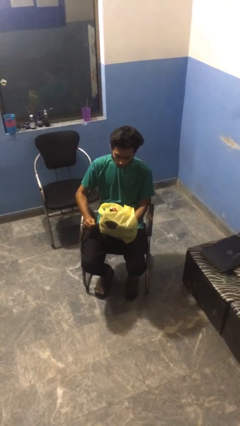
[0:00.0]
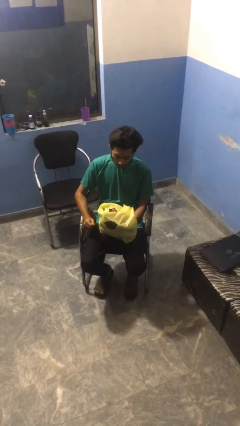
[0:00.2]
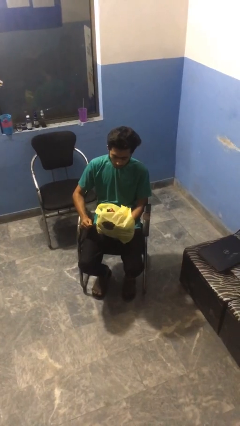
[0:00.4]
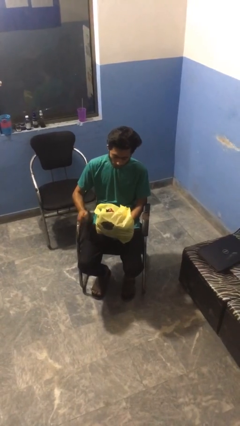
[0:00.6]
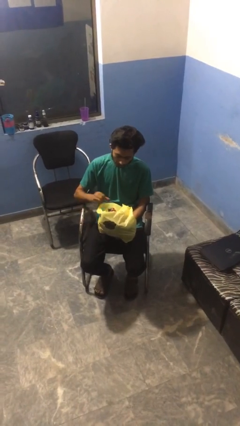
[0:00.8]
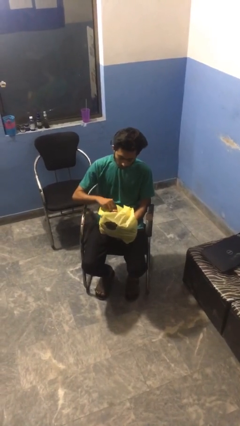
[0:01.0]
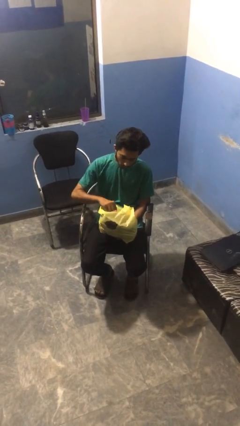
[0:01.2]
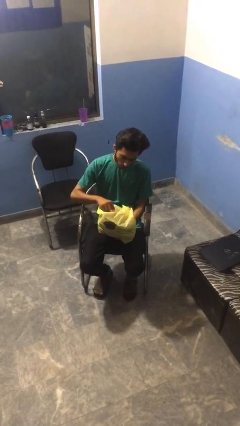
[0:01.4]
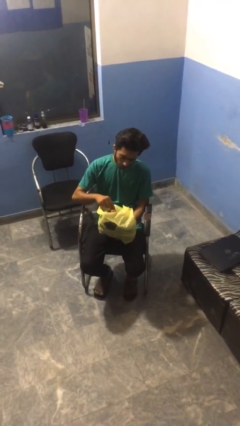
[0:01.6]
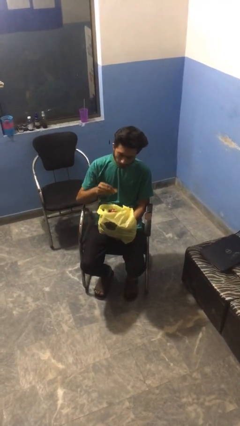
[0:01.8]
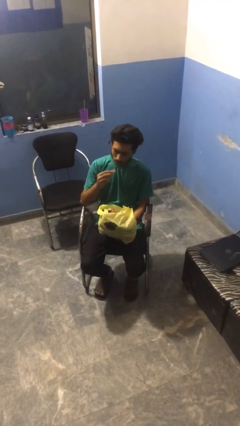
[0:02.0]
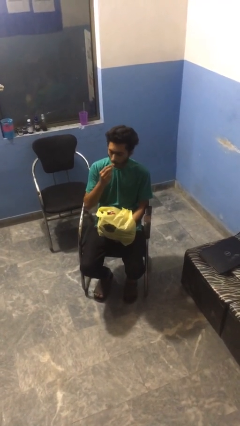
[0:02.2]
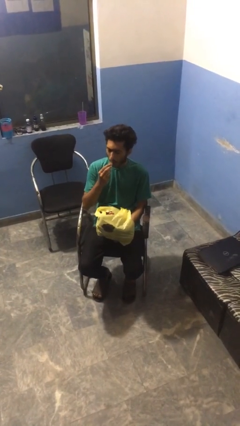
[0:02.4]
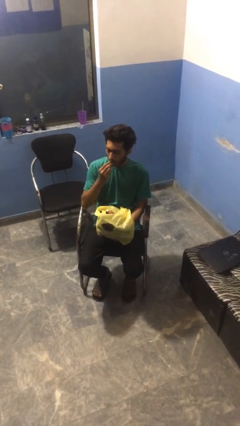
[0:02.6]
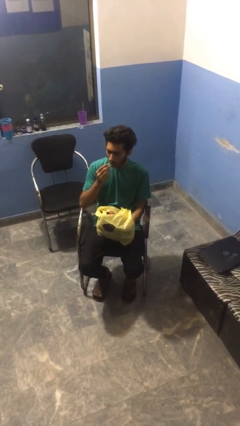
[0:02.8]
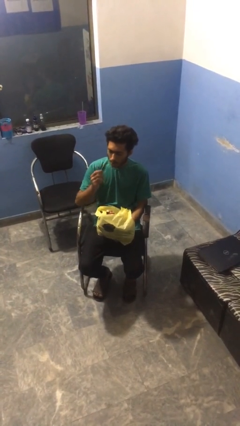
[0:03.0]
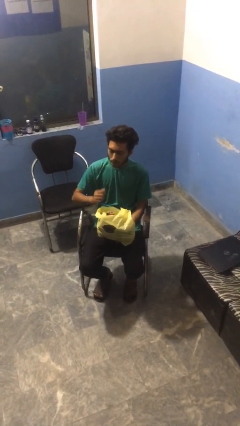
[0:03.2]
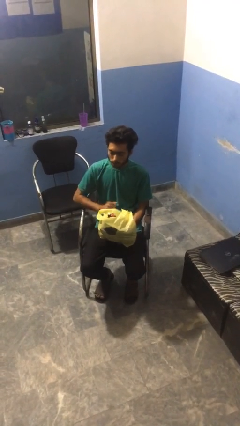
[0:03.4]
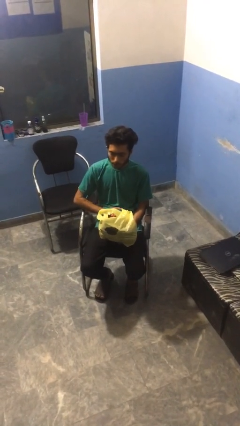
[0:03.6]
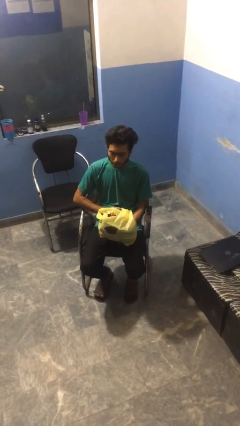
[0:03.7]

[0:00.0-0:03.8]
person eats snack from bag

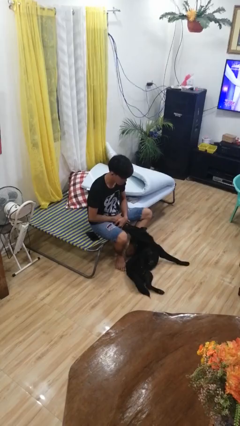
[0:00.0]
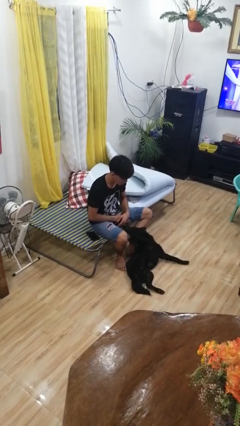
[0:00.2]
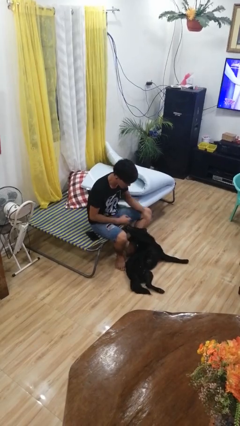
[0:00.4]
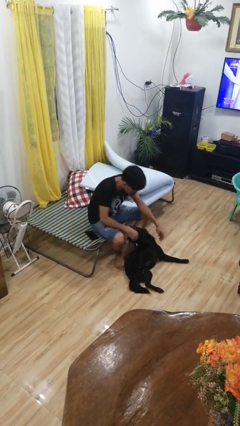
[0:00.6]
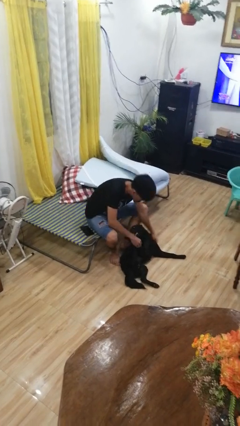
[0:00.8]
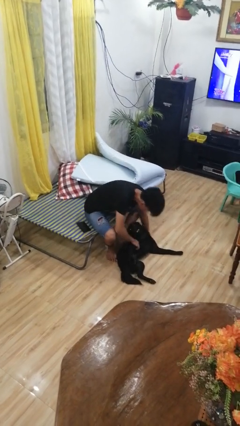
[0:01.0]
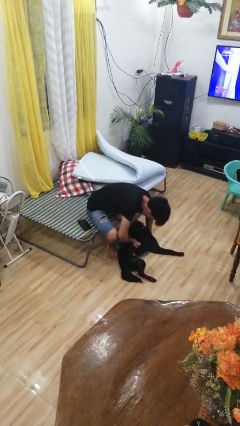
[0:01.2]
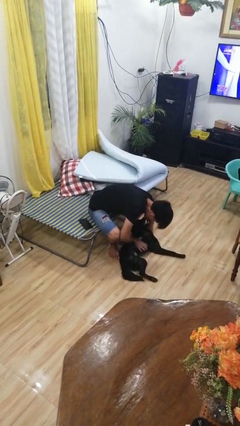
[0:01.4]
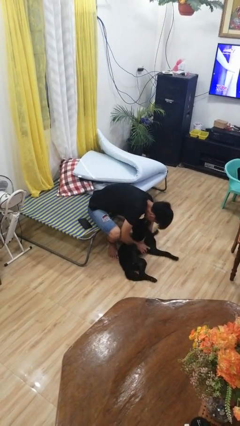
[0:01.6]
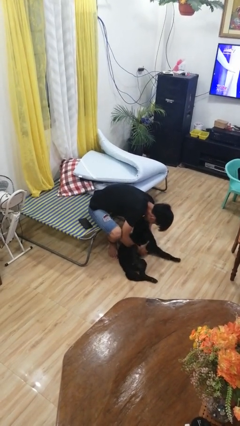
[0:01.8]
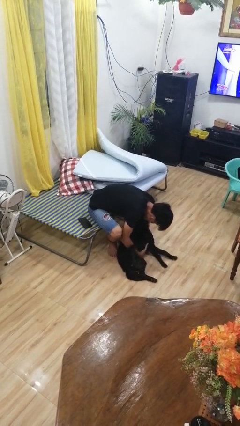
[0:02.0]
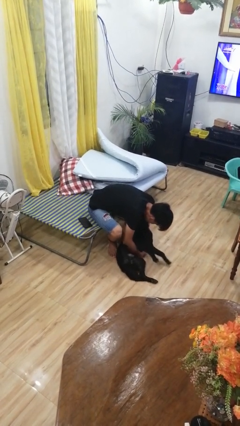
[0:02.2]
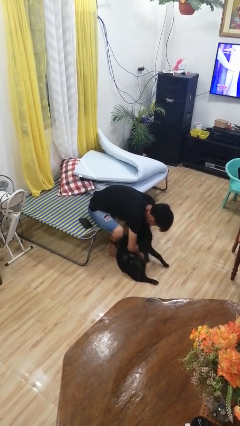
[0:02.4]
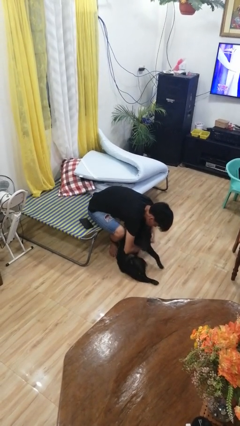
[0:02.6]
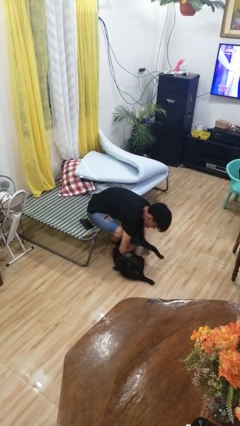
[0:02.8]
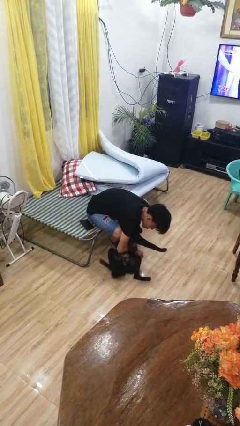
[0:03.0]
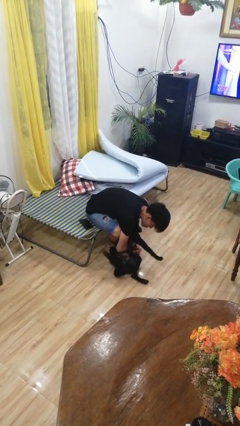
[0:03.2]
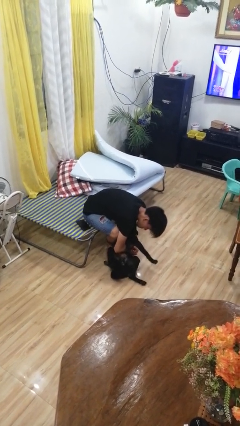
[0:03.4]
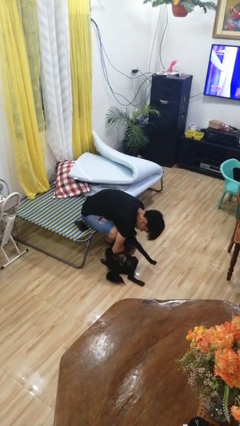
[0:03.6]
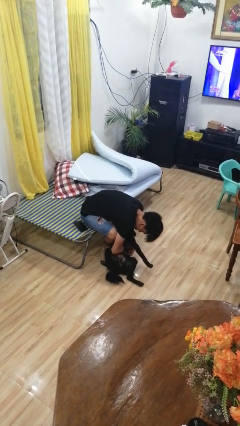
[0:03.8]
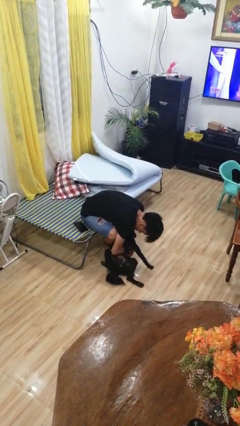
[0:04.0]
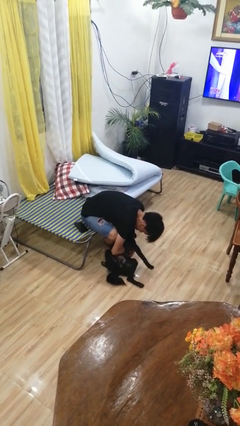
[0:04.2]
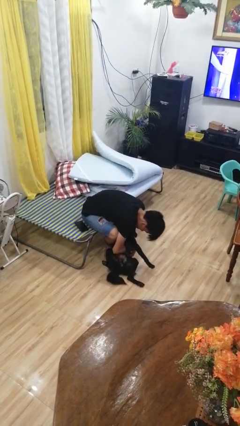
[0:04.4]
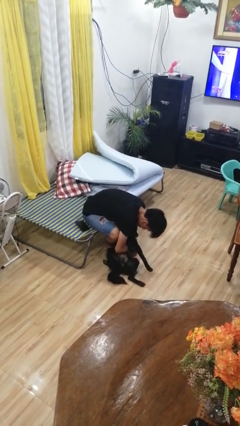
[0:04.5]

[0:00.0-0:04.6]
person hugs dog

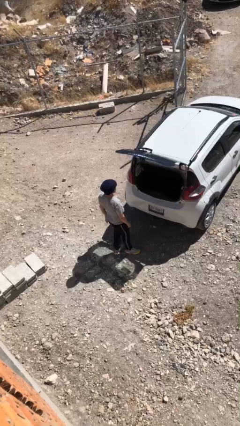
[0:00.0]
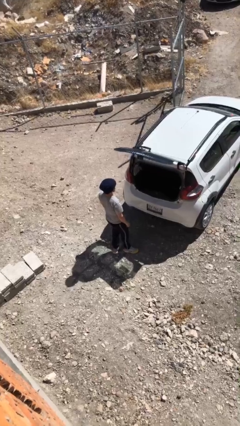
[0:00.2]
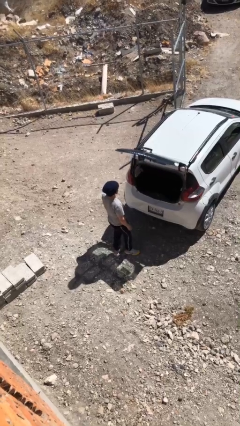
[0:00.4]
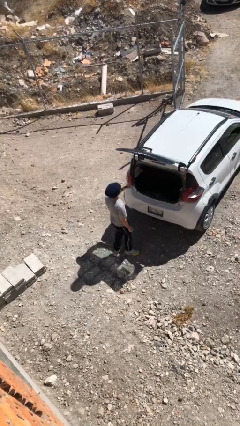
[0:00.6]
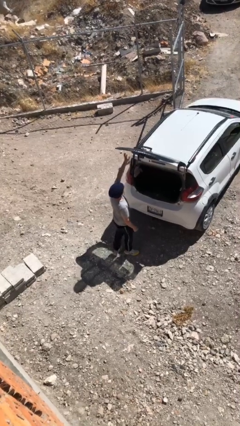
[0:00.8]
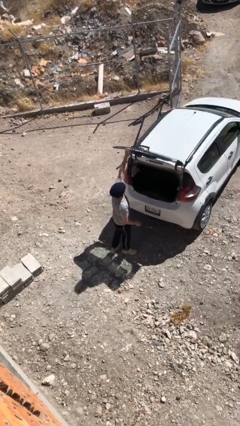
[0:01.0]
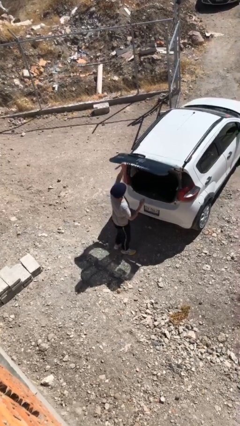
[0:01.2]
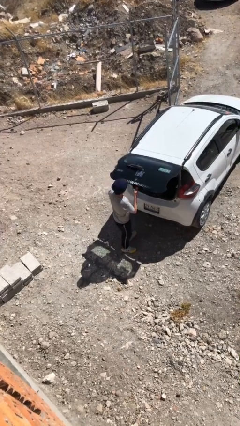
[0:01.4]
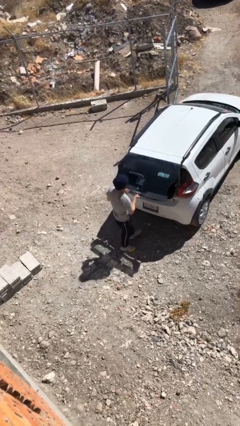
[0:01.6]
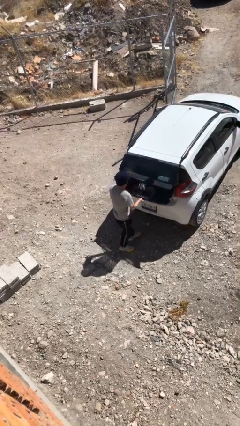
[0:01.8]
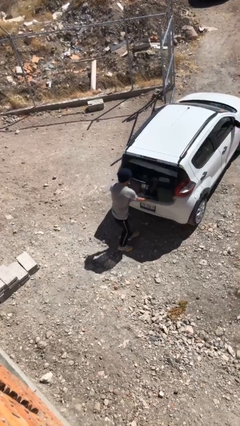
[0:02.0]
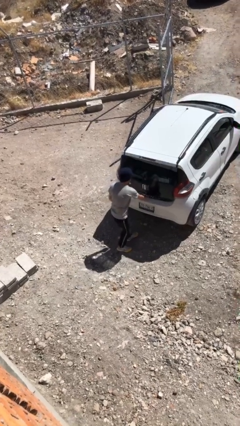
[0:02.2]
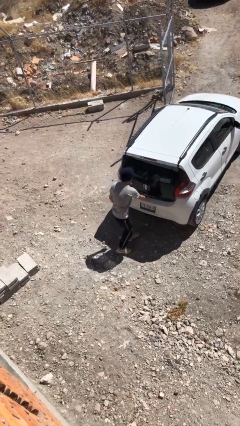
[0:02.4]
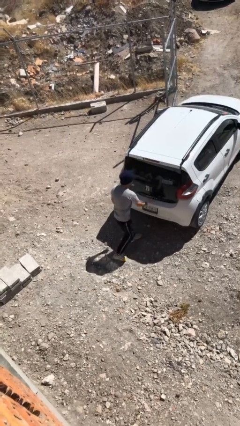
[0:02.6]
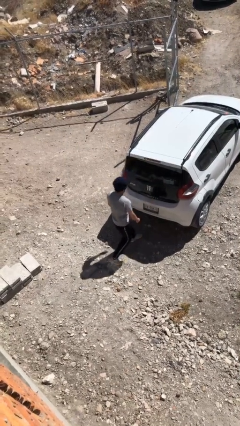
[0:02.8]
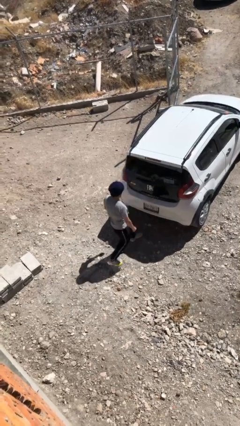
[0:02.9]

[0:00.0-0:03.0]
person closes car trunk

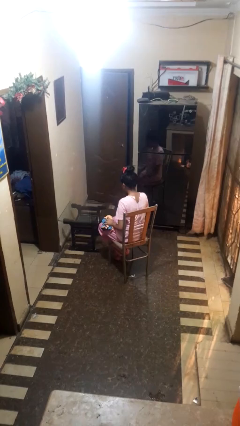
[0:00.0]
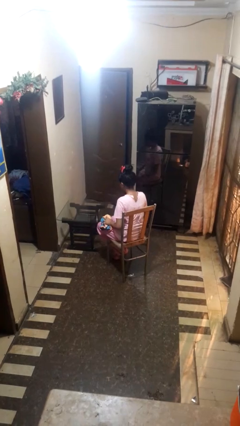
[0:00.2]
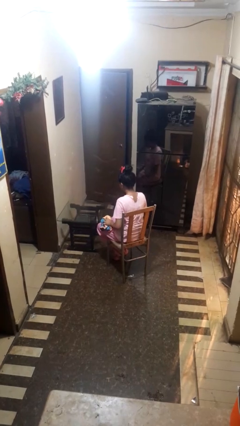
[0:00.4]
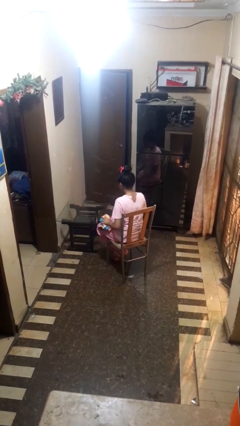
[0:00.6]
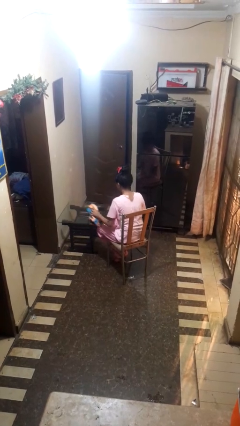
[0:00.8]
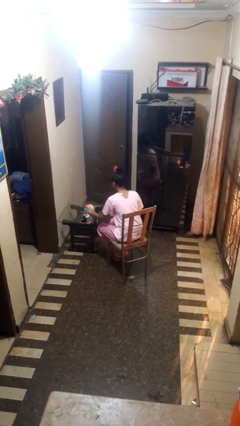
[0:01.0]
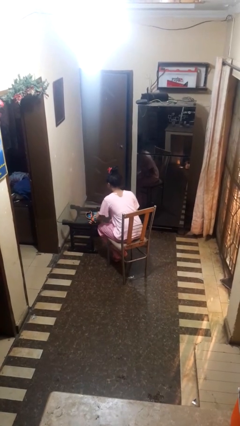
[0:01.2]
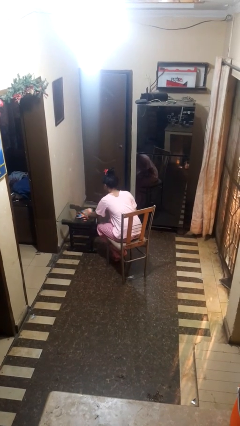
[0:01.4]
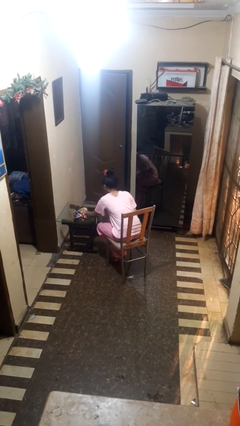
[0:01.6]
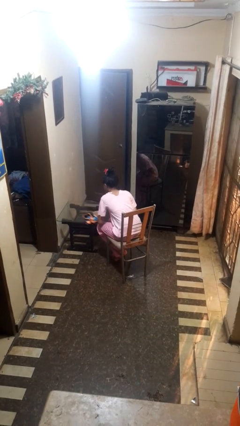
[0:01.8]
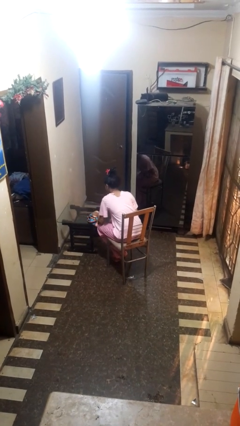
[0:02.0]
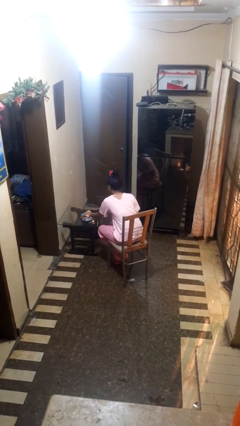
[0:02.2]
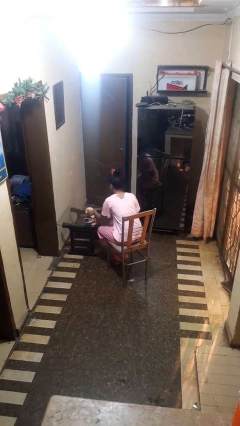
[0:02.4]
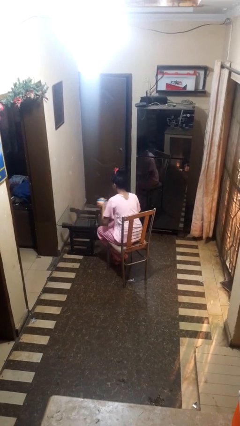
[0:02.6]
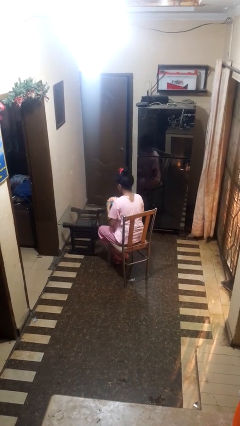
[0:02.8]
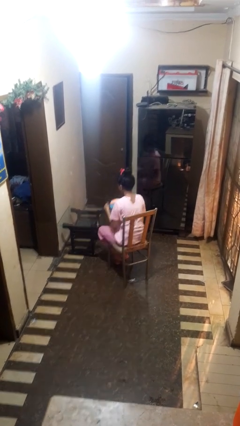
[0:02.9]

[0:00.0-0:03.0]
person cleans table with rag

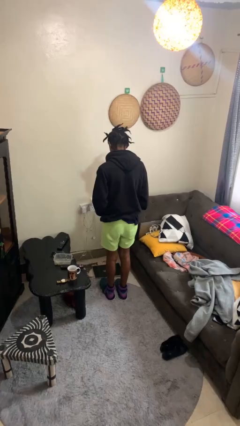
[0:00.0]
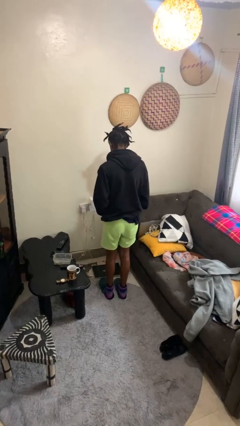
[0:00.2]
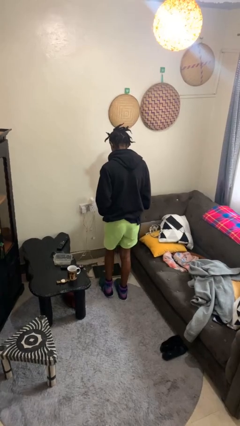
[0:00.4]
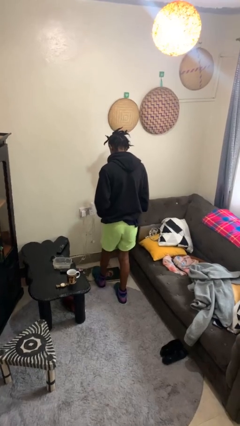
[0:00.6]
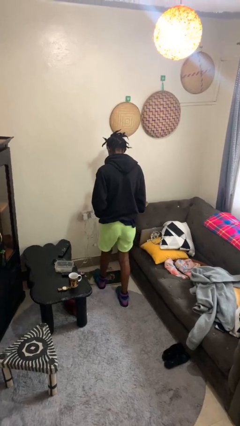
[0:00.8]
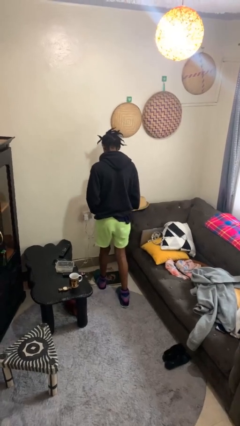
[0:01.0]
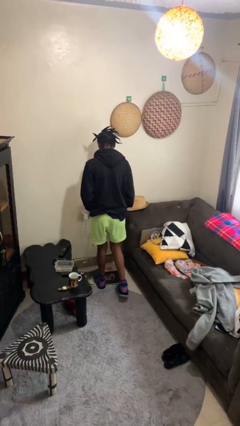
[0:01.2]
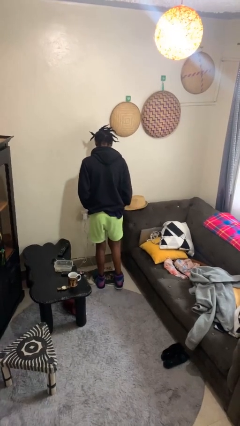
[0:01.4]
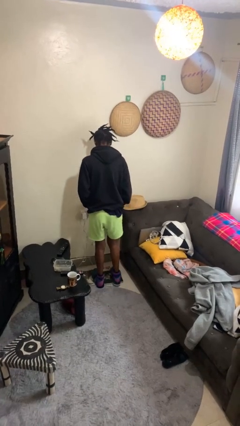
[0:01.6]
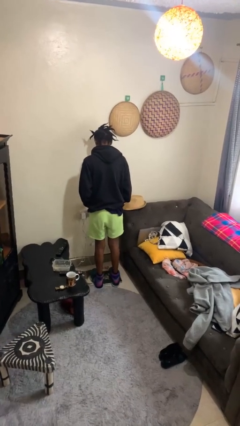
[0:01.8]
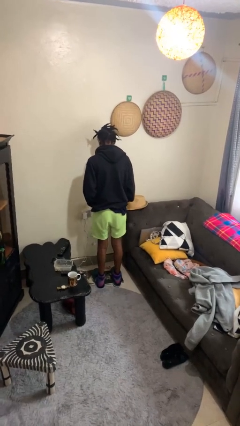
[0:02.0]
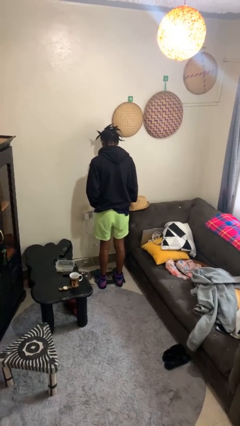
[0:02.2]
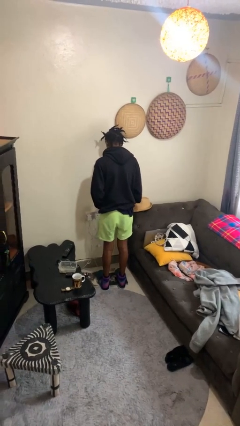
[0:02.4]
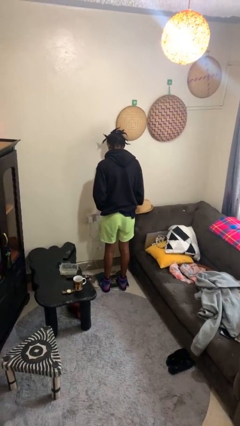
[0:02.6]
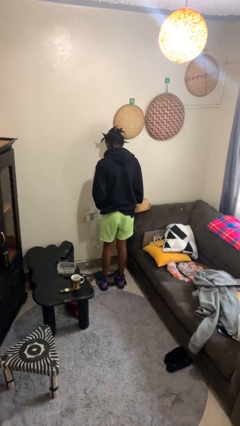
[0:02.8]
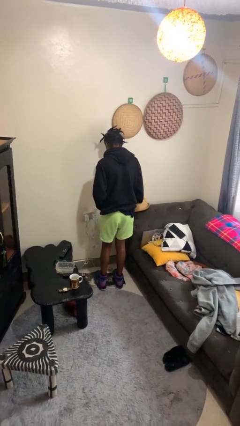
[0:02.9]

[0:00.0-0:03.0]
person uses bodyweight scale

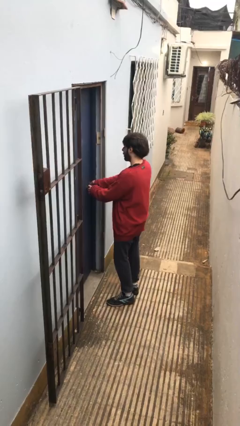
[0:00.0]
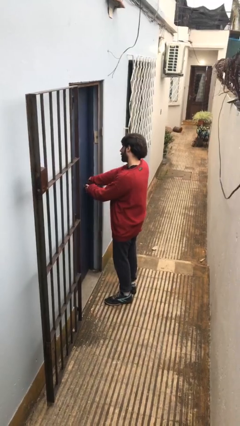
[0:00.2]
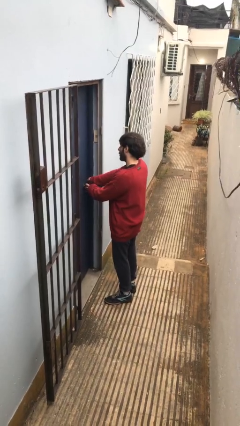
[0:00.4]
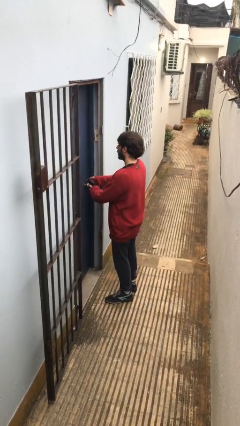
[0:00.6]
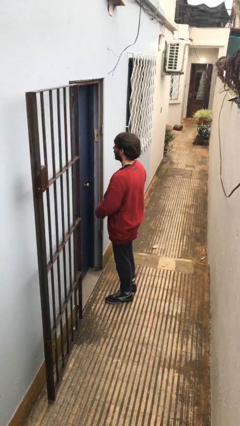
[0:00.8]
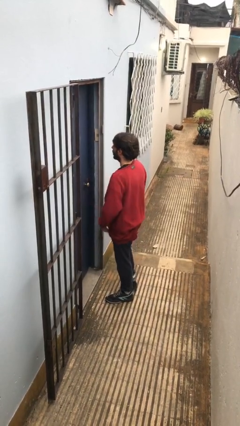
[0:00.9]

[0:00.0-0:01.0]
person locks door with keys
